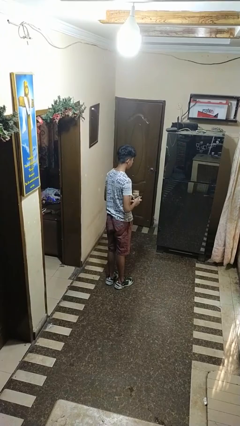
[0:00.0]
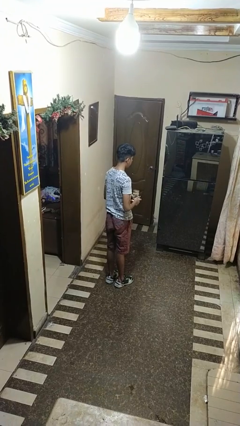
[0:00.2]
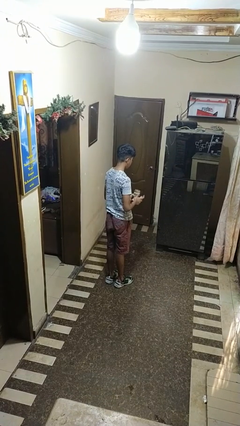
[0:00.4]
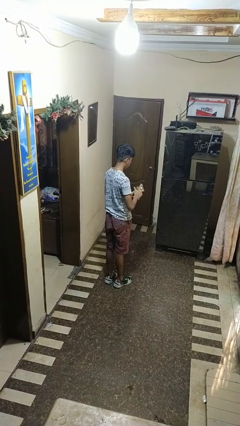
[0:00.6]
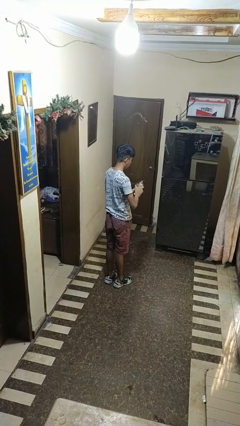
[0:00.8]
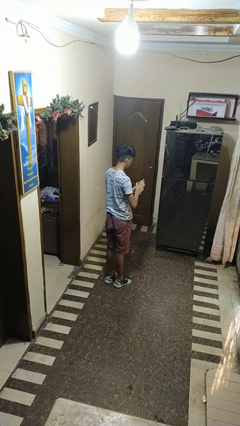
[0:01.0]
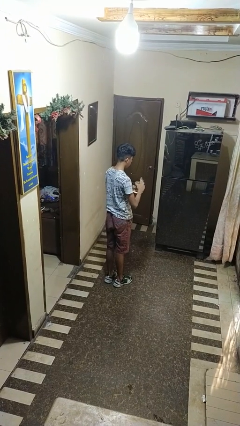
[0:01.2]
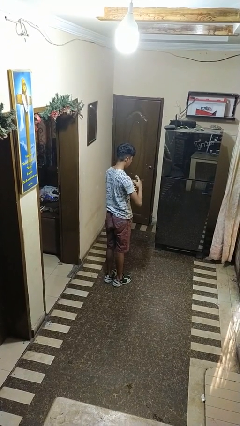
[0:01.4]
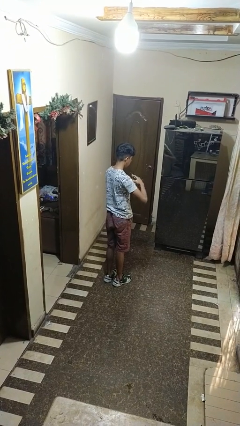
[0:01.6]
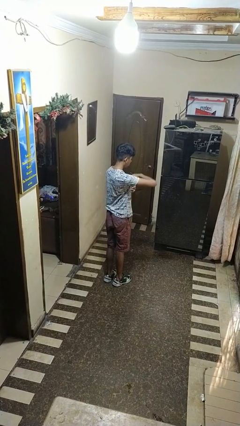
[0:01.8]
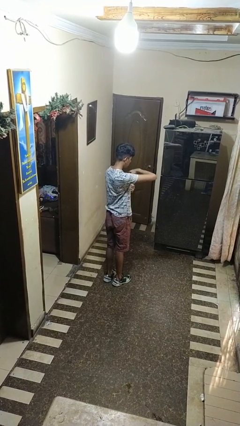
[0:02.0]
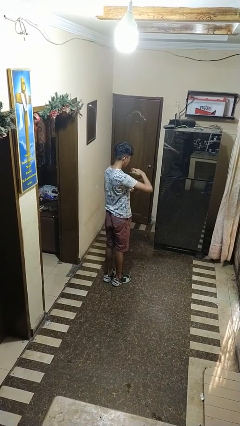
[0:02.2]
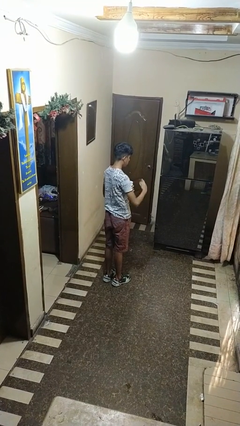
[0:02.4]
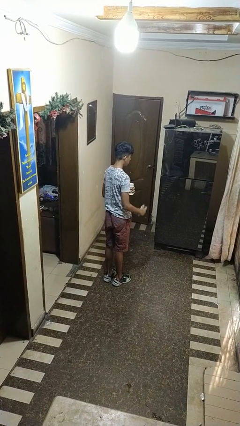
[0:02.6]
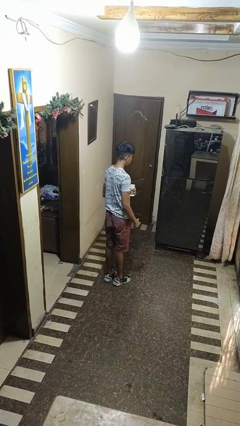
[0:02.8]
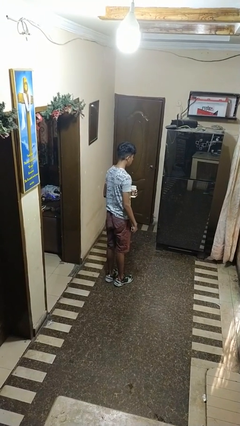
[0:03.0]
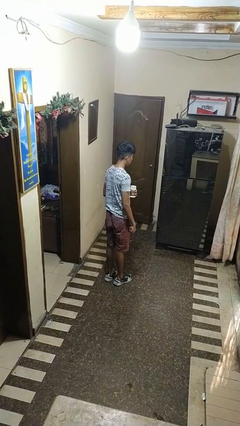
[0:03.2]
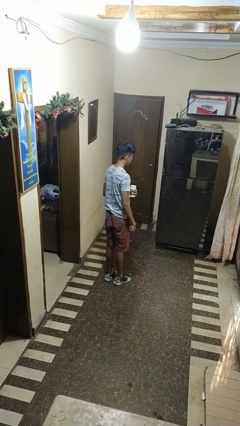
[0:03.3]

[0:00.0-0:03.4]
person opens can with can opener

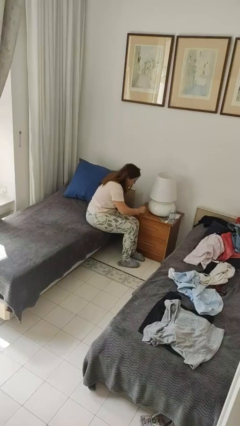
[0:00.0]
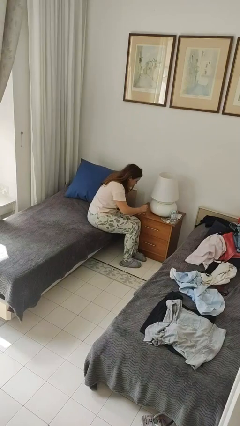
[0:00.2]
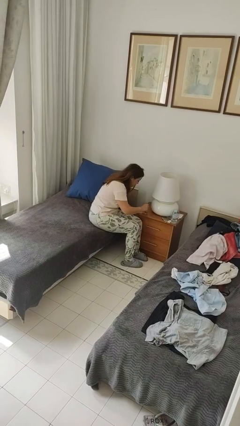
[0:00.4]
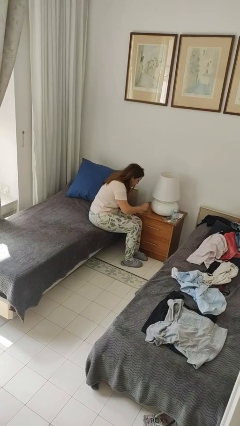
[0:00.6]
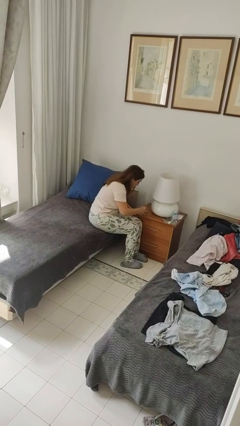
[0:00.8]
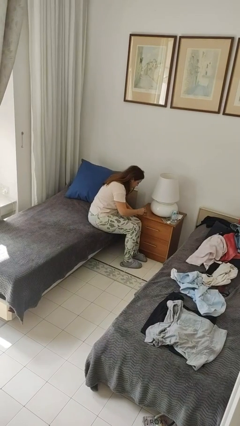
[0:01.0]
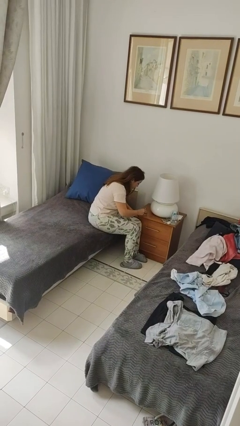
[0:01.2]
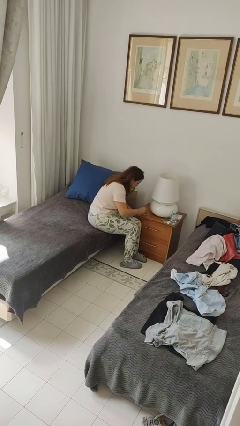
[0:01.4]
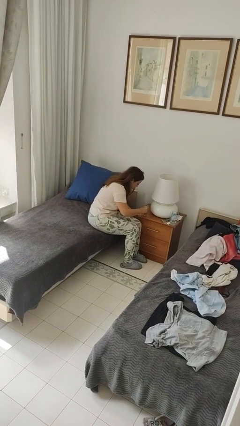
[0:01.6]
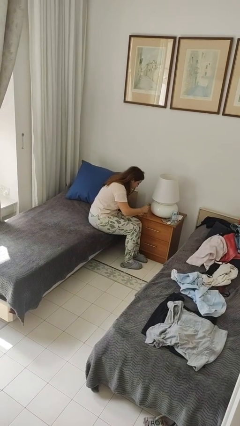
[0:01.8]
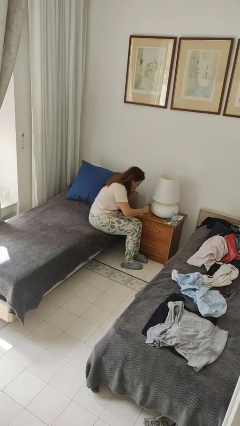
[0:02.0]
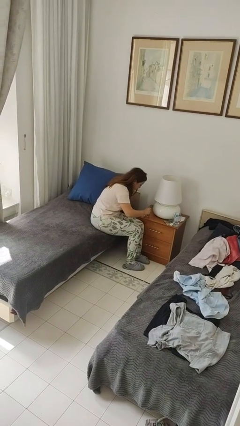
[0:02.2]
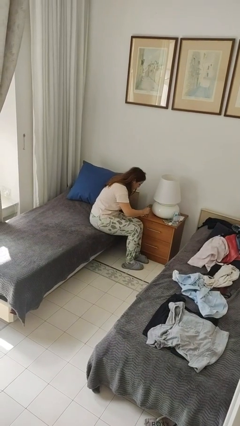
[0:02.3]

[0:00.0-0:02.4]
person paints fingernails

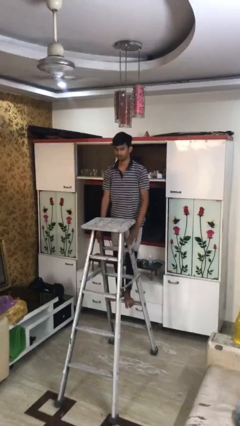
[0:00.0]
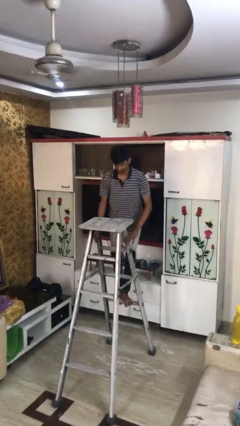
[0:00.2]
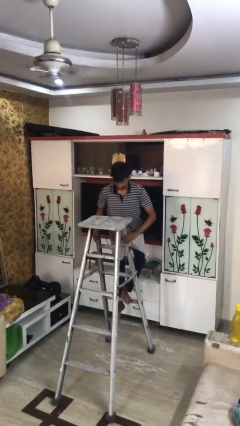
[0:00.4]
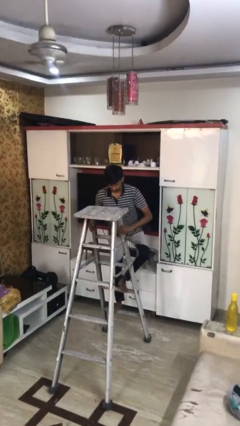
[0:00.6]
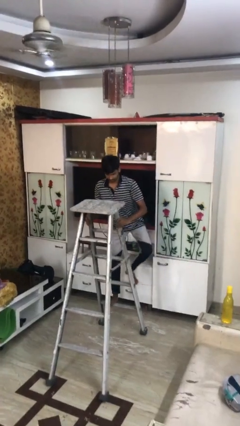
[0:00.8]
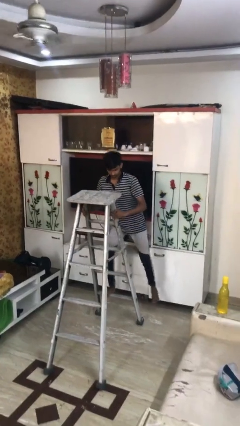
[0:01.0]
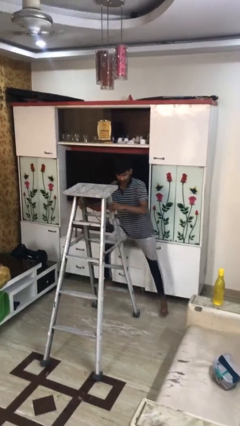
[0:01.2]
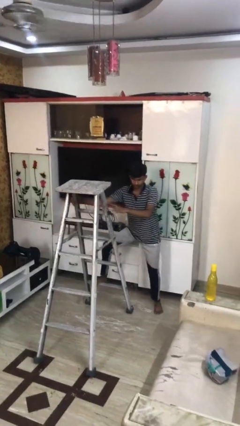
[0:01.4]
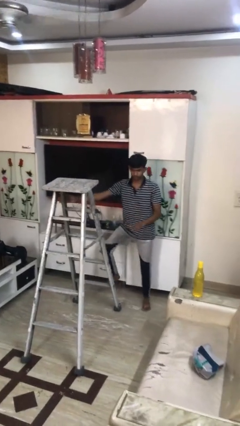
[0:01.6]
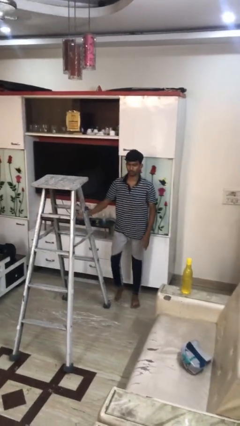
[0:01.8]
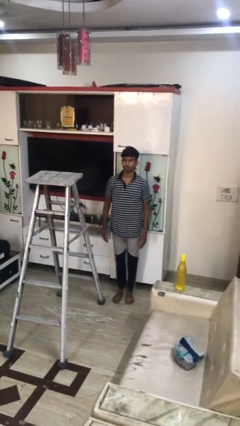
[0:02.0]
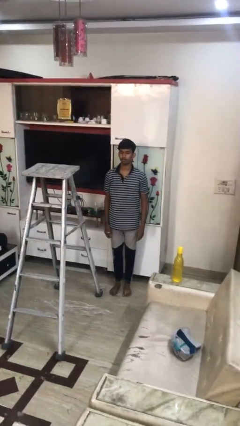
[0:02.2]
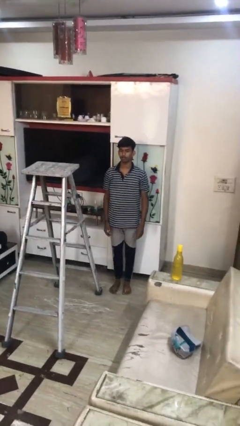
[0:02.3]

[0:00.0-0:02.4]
person climbs down ladder

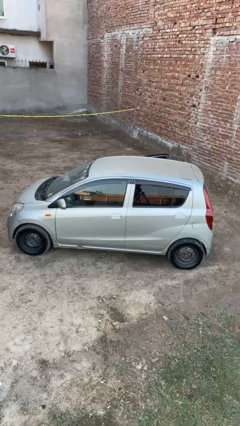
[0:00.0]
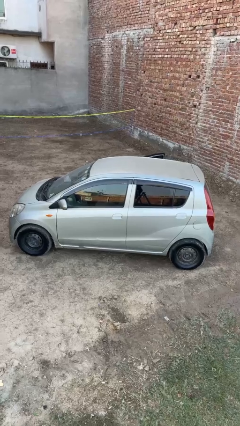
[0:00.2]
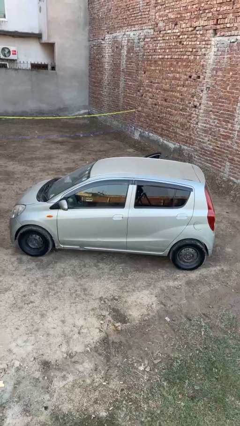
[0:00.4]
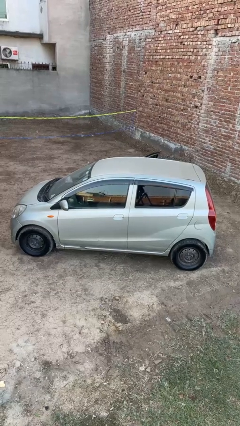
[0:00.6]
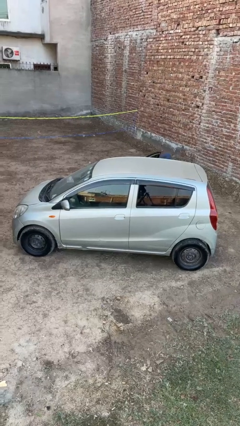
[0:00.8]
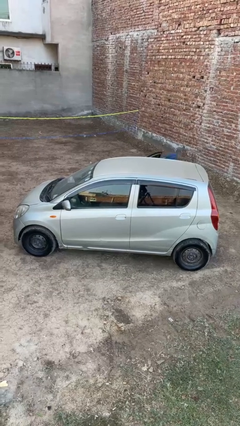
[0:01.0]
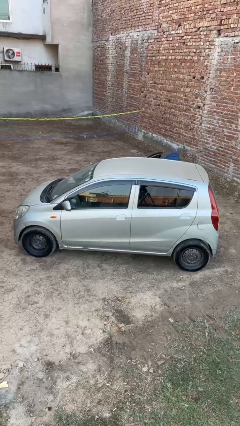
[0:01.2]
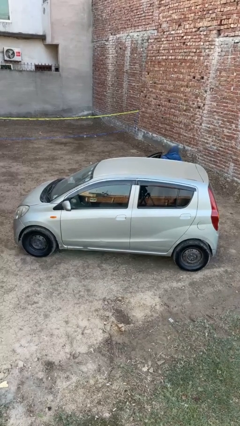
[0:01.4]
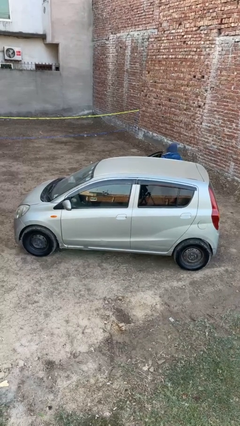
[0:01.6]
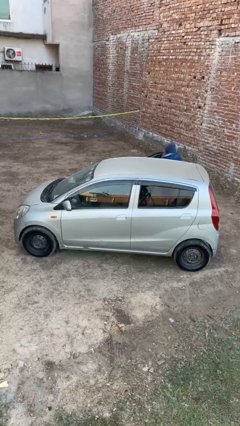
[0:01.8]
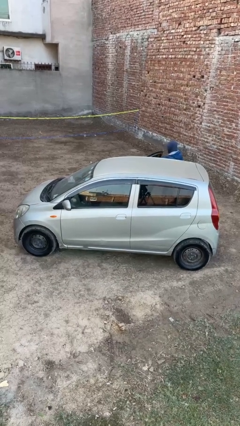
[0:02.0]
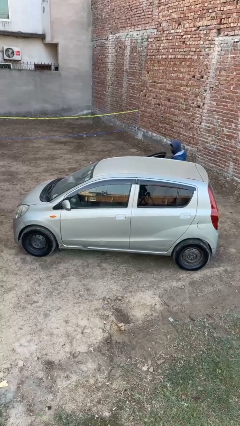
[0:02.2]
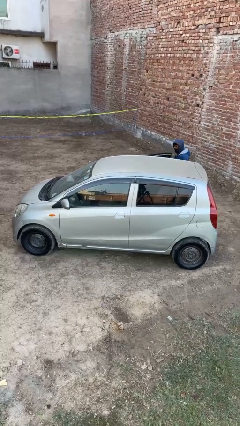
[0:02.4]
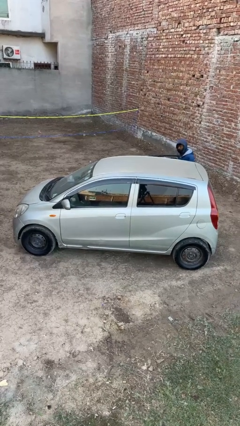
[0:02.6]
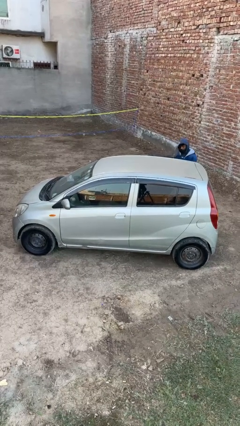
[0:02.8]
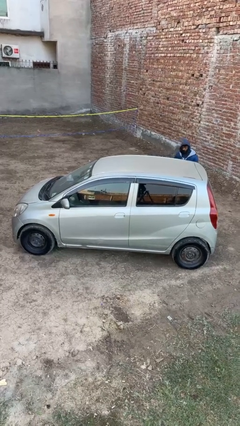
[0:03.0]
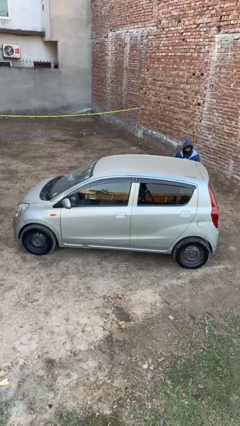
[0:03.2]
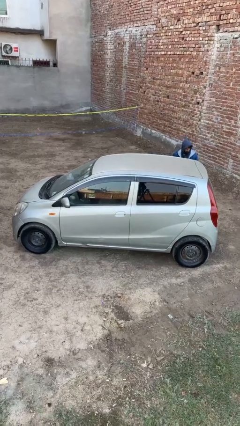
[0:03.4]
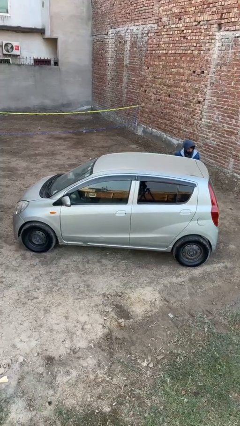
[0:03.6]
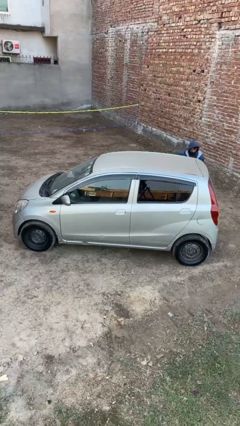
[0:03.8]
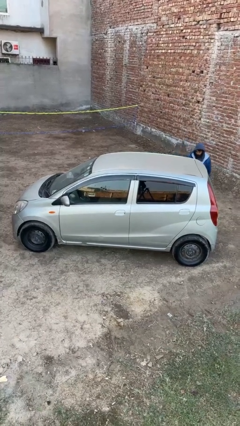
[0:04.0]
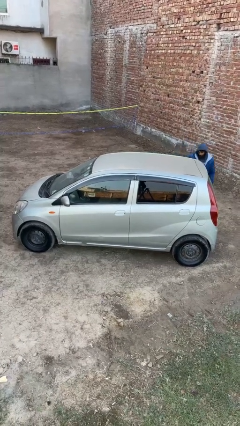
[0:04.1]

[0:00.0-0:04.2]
car drops off person

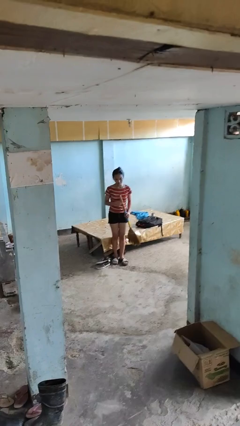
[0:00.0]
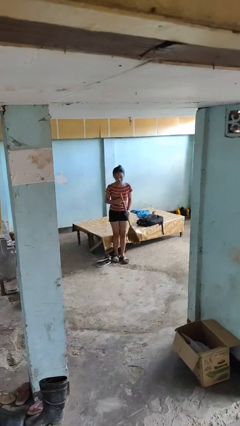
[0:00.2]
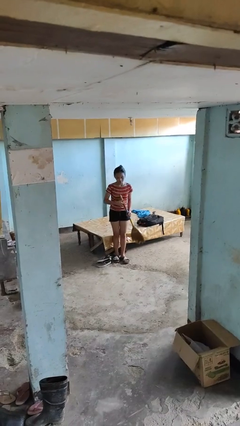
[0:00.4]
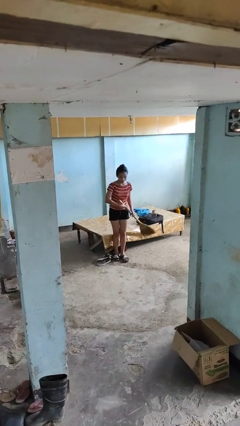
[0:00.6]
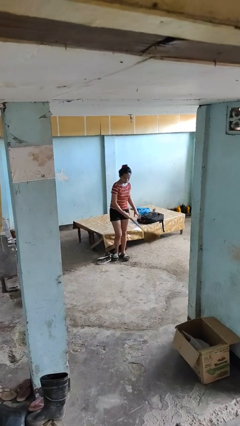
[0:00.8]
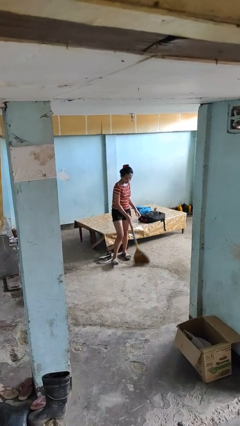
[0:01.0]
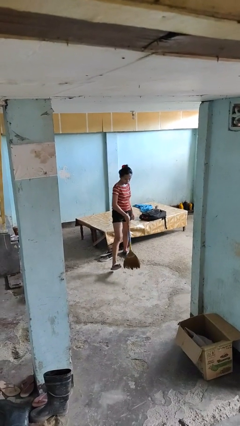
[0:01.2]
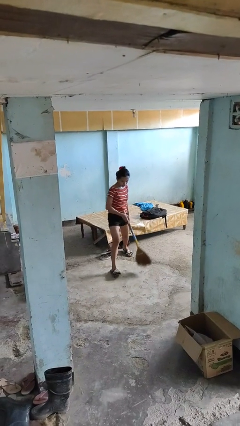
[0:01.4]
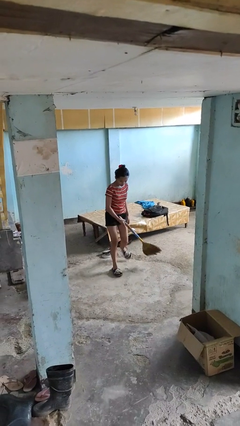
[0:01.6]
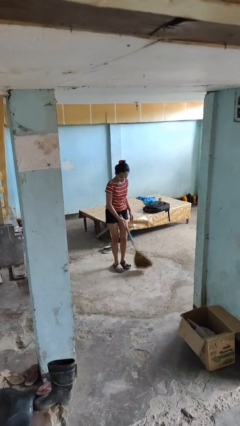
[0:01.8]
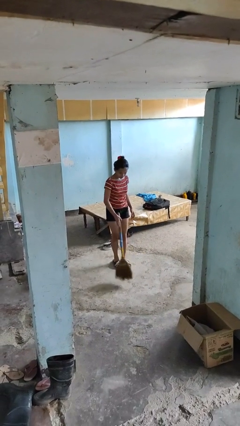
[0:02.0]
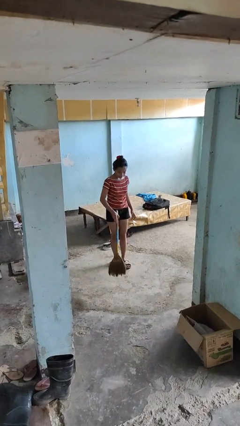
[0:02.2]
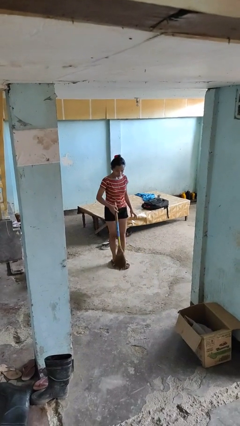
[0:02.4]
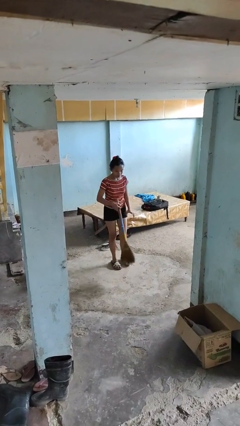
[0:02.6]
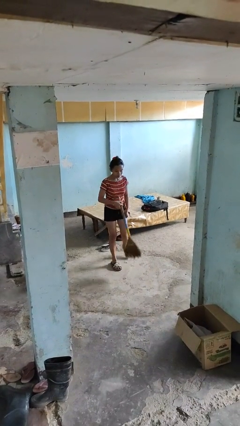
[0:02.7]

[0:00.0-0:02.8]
person sweeps floor

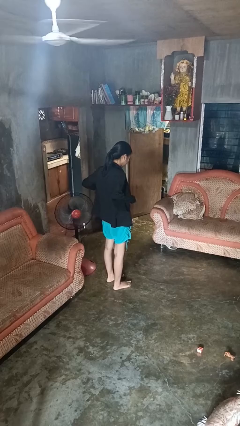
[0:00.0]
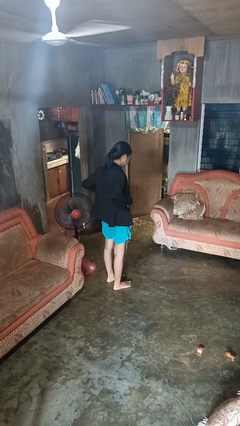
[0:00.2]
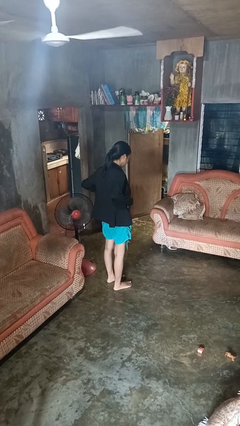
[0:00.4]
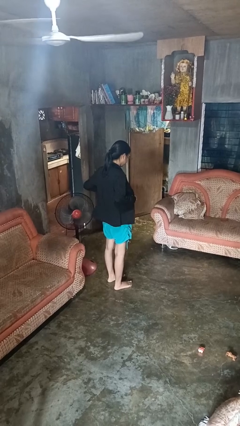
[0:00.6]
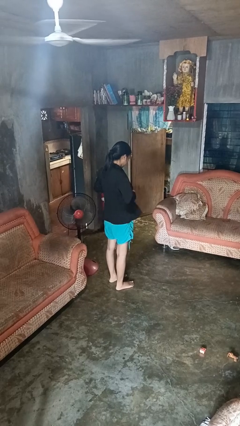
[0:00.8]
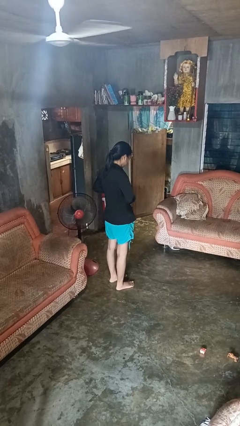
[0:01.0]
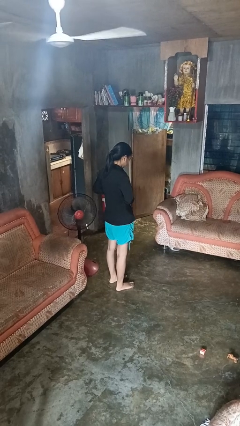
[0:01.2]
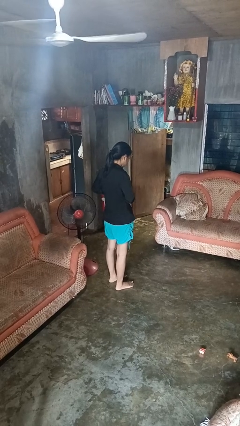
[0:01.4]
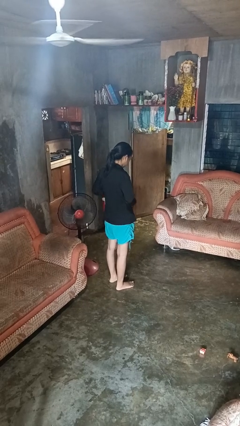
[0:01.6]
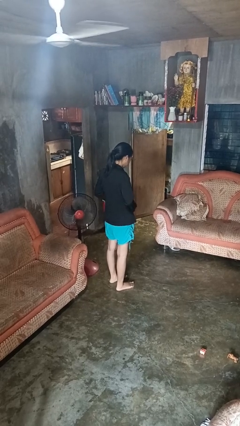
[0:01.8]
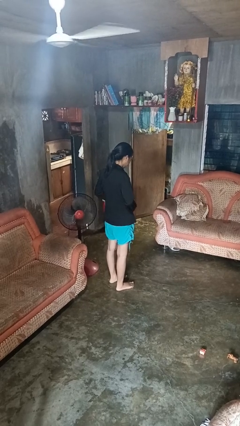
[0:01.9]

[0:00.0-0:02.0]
person buttons shirt

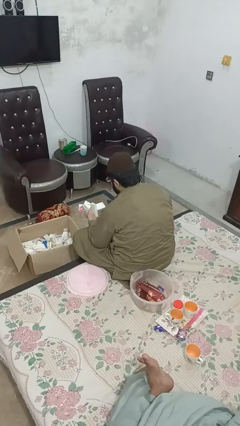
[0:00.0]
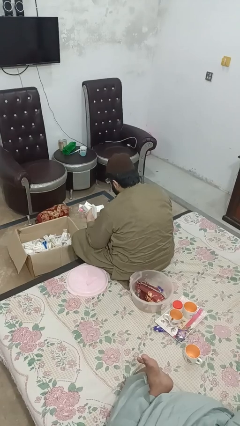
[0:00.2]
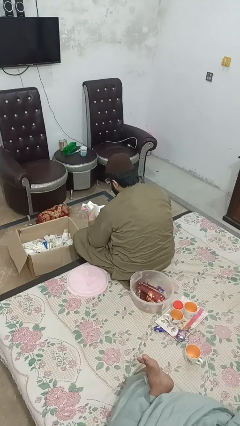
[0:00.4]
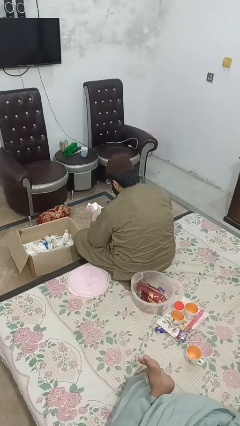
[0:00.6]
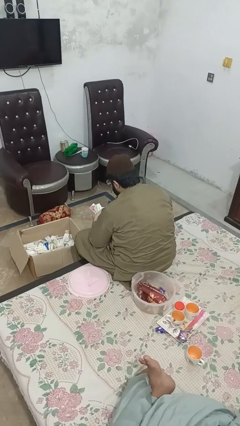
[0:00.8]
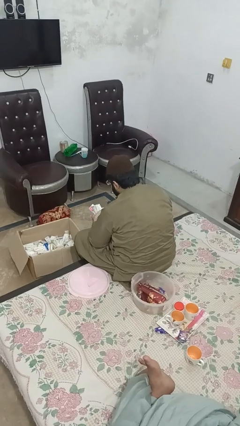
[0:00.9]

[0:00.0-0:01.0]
person puts object into box
